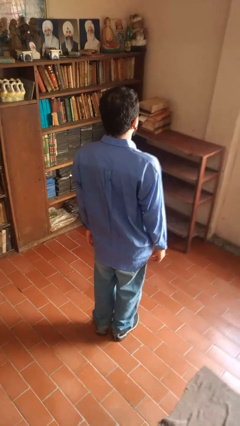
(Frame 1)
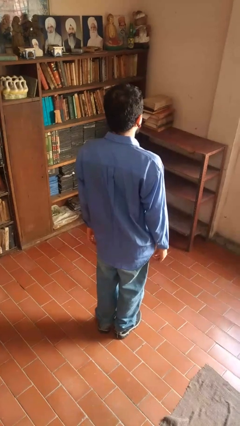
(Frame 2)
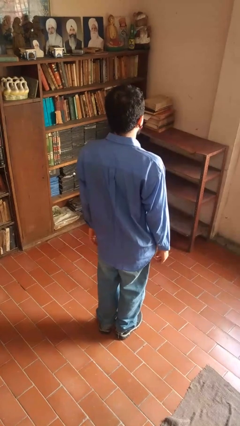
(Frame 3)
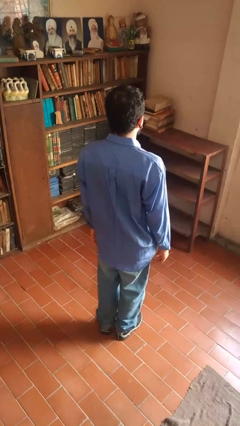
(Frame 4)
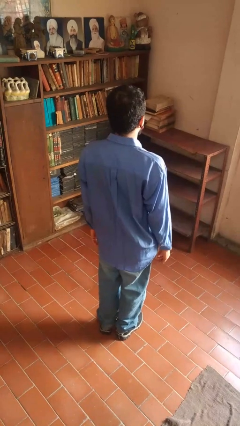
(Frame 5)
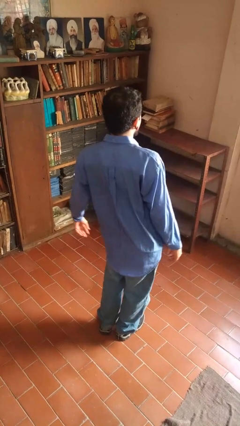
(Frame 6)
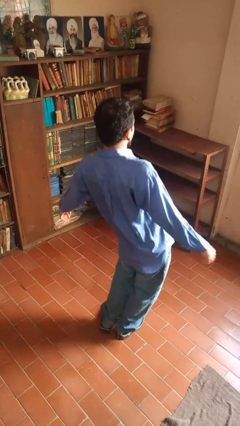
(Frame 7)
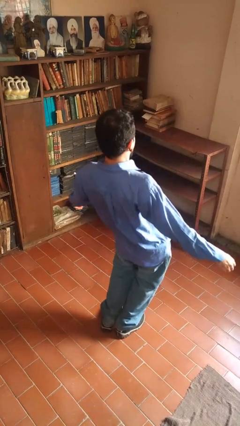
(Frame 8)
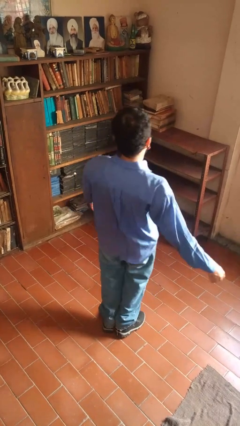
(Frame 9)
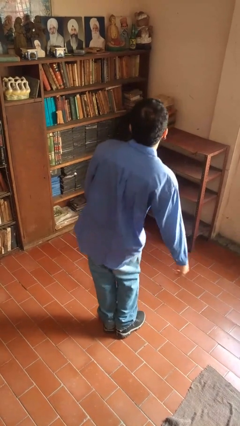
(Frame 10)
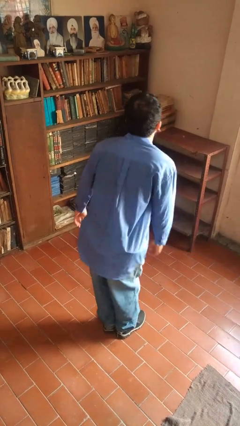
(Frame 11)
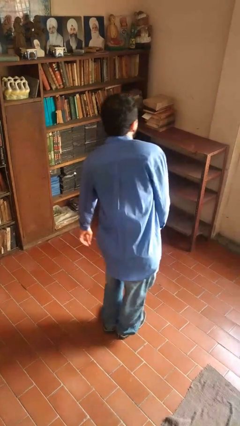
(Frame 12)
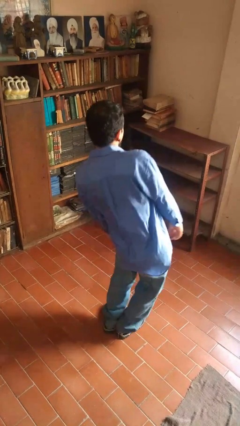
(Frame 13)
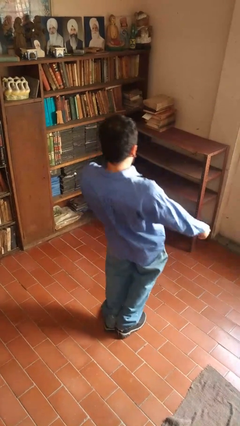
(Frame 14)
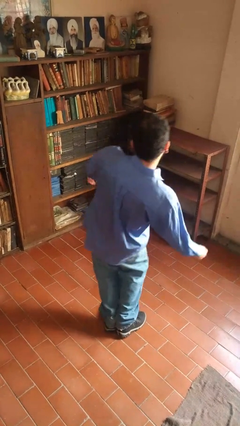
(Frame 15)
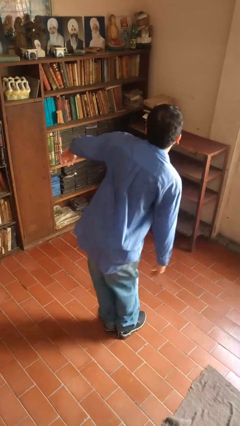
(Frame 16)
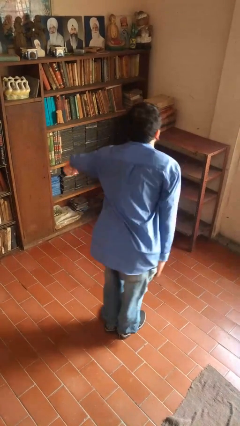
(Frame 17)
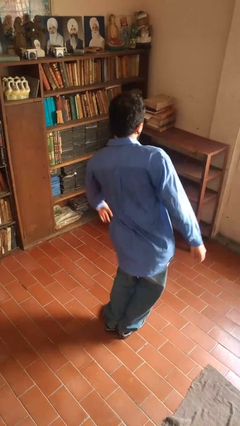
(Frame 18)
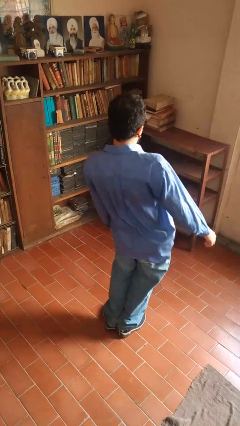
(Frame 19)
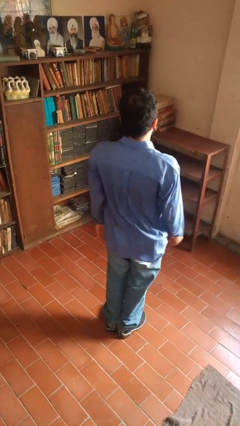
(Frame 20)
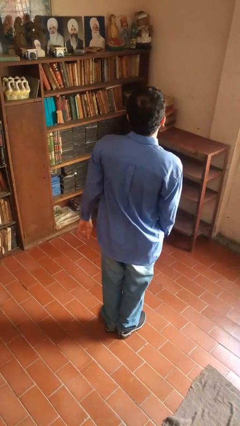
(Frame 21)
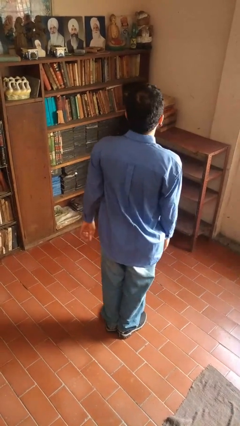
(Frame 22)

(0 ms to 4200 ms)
person wiggles hips

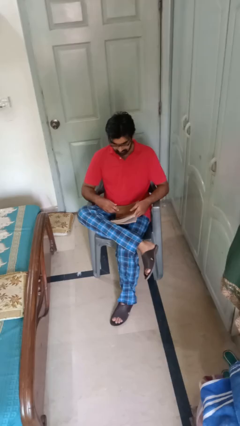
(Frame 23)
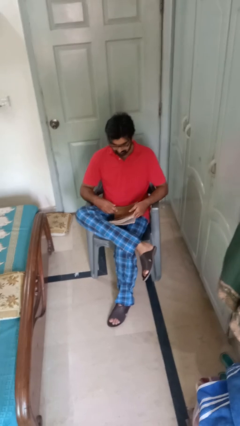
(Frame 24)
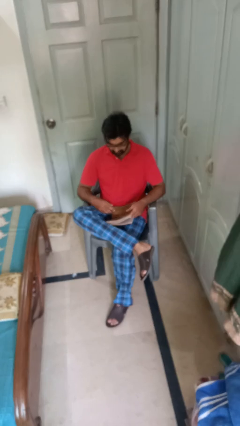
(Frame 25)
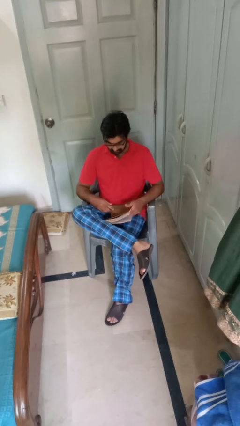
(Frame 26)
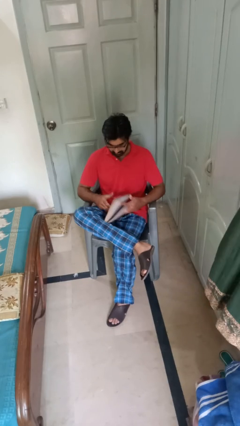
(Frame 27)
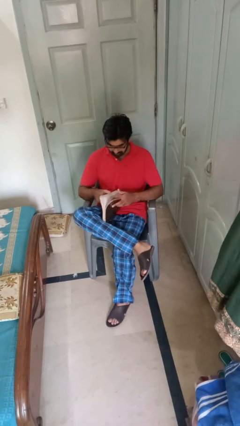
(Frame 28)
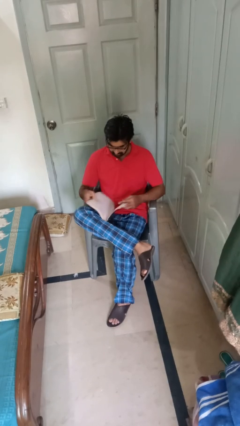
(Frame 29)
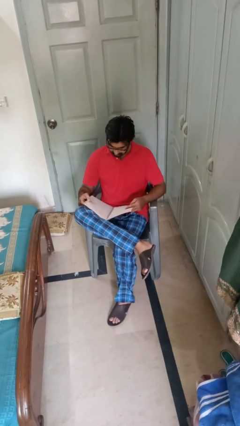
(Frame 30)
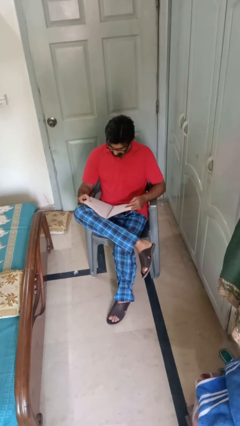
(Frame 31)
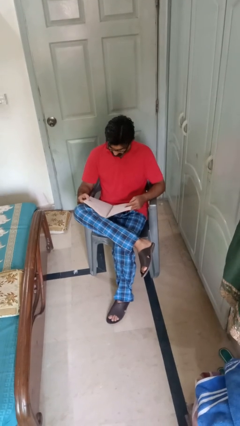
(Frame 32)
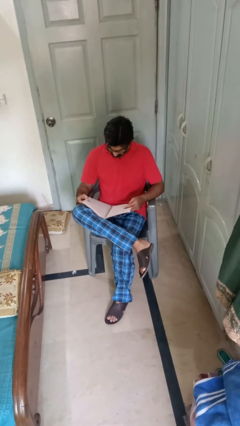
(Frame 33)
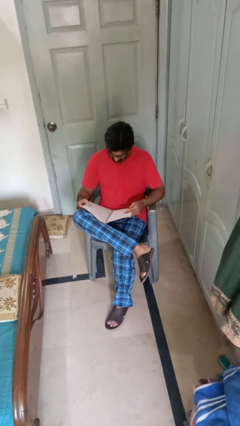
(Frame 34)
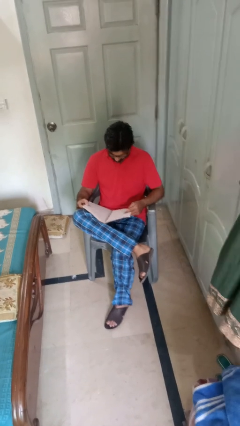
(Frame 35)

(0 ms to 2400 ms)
person reads magazine

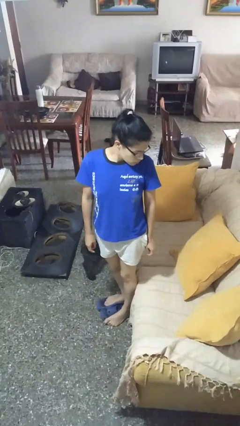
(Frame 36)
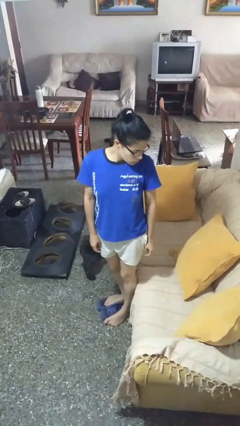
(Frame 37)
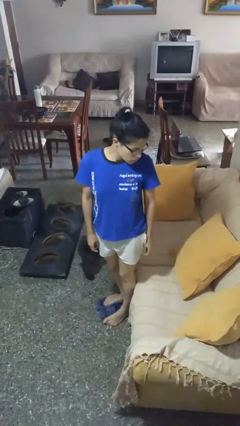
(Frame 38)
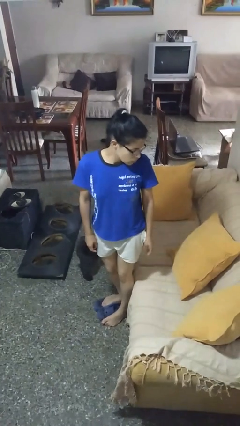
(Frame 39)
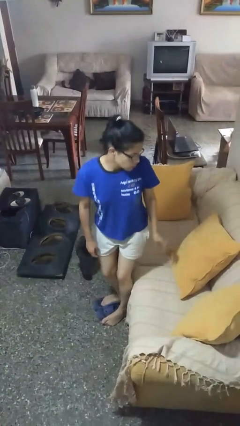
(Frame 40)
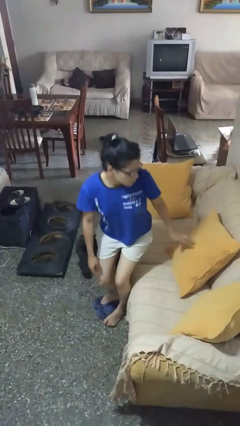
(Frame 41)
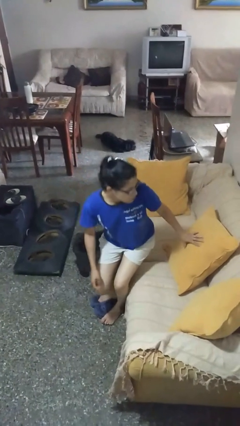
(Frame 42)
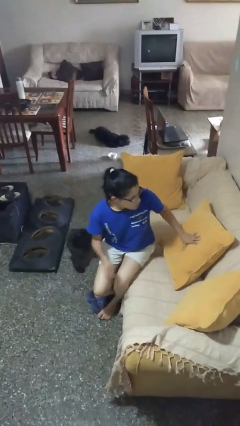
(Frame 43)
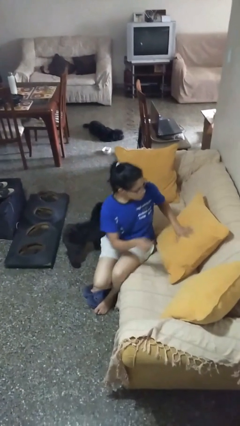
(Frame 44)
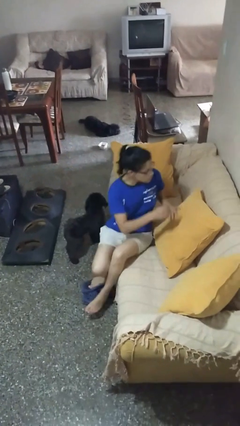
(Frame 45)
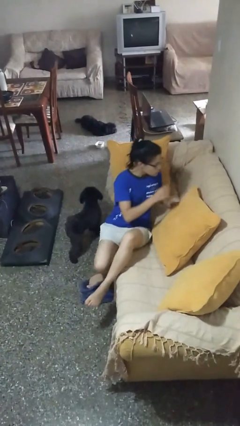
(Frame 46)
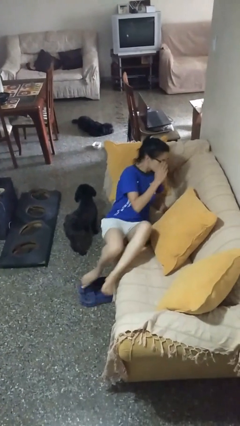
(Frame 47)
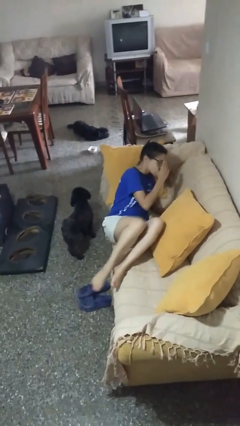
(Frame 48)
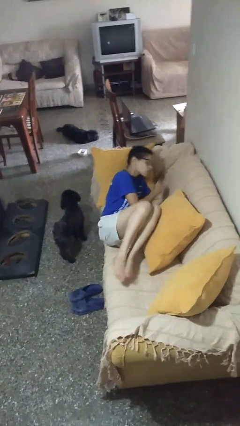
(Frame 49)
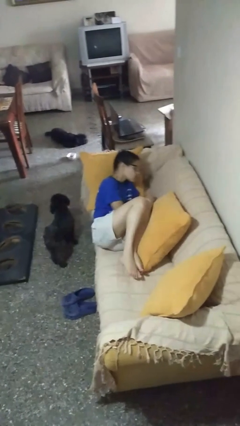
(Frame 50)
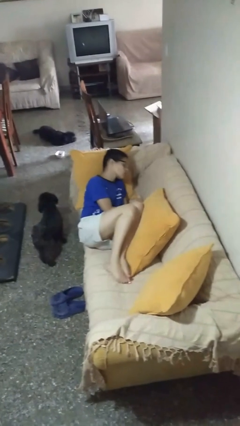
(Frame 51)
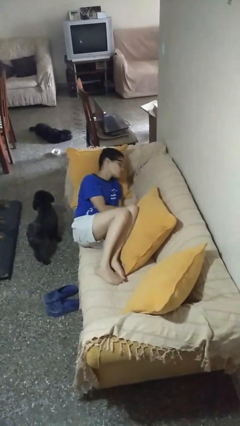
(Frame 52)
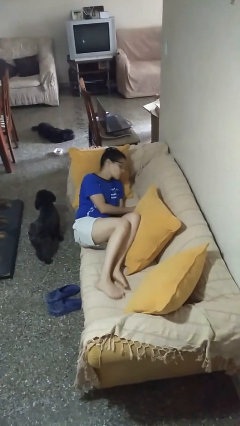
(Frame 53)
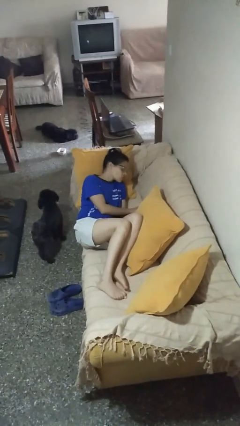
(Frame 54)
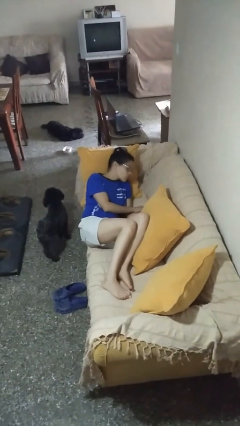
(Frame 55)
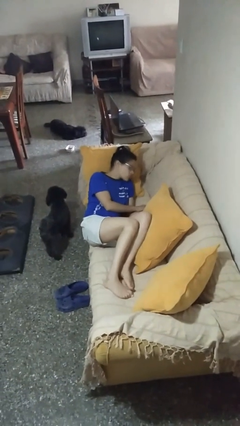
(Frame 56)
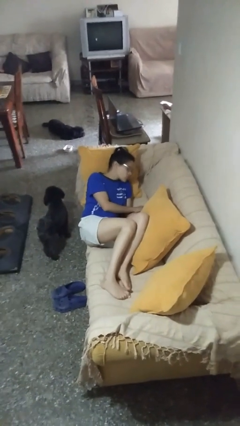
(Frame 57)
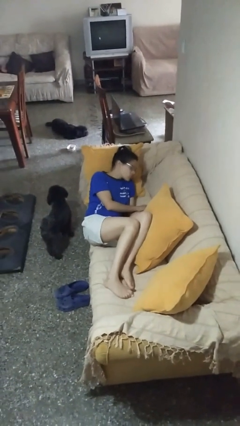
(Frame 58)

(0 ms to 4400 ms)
person lies down on couch

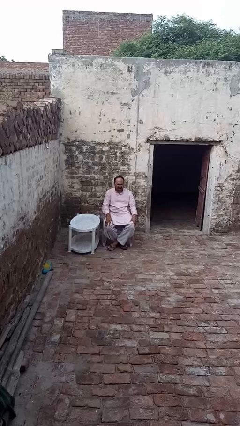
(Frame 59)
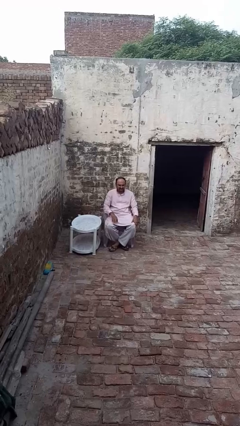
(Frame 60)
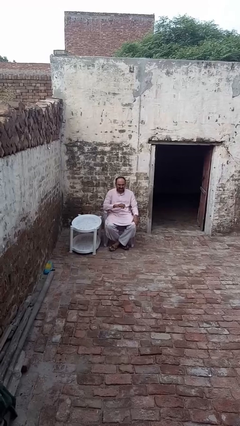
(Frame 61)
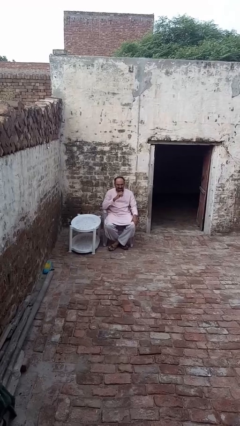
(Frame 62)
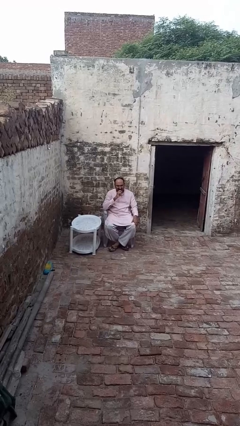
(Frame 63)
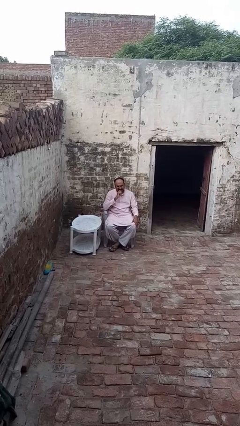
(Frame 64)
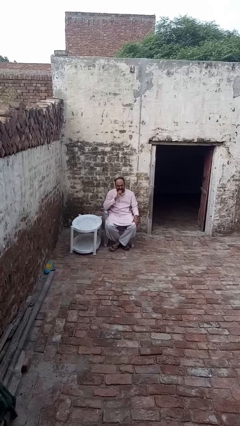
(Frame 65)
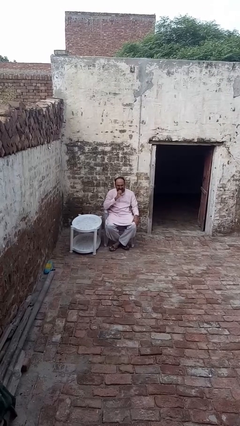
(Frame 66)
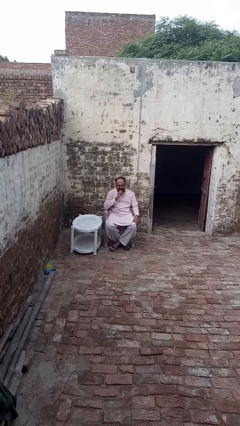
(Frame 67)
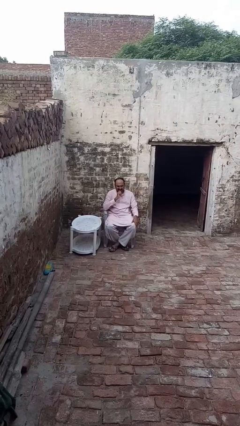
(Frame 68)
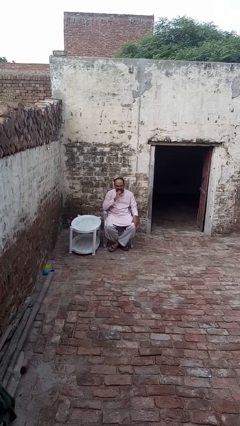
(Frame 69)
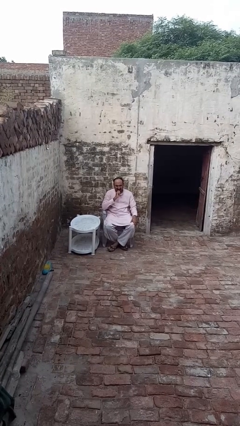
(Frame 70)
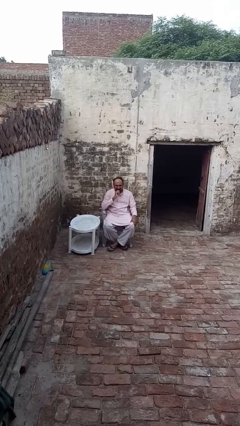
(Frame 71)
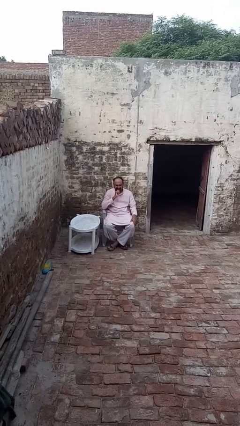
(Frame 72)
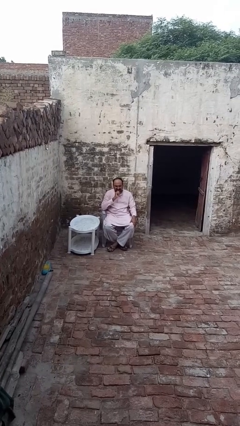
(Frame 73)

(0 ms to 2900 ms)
person strokes chin

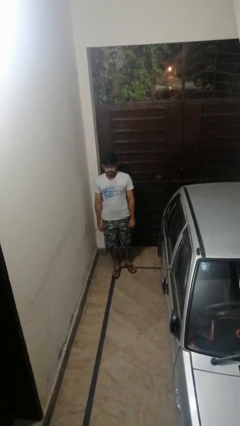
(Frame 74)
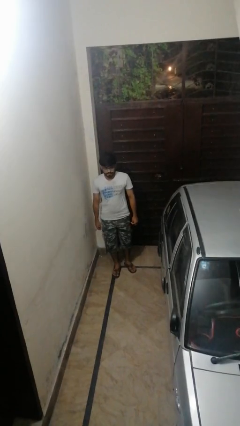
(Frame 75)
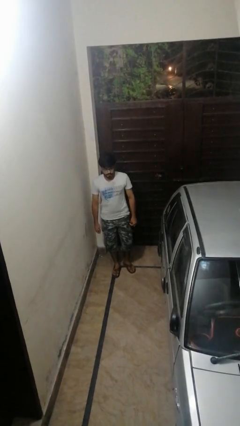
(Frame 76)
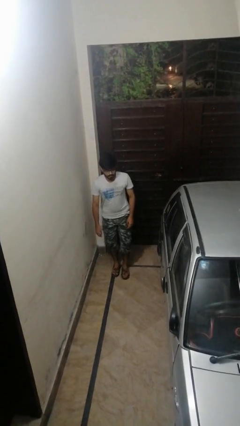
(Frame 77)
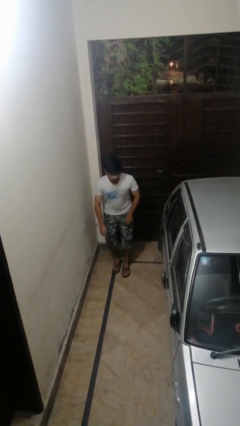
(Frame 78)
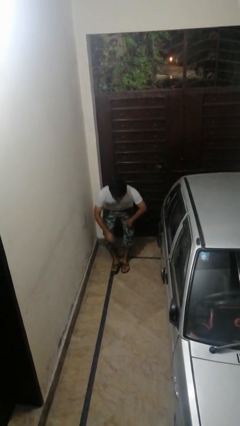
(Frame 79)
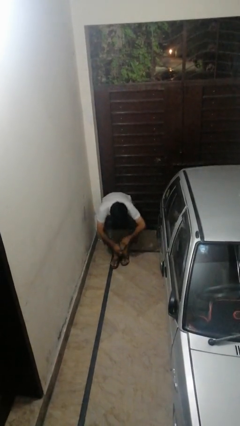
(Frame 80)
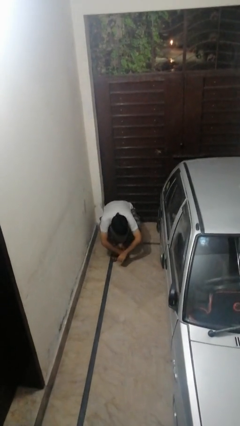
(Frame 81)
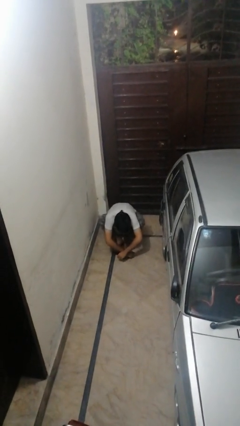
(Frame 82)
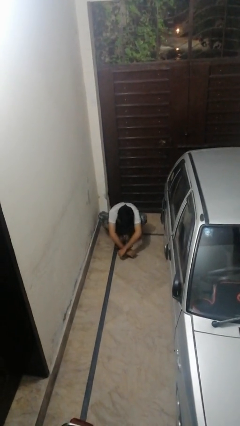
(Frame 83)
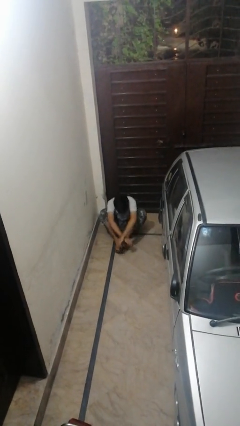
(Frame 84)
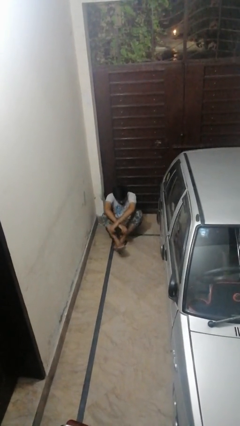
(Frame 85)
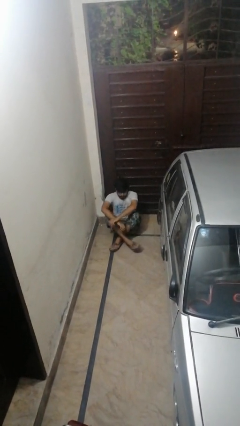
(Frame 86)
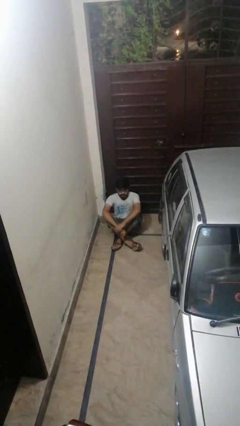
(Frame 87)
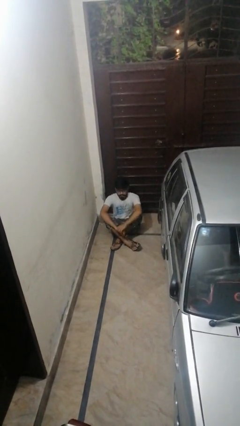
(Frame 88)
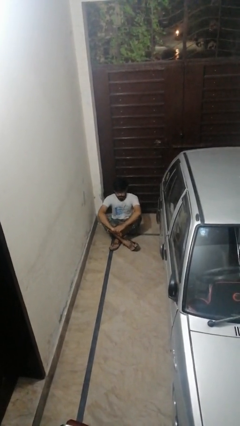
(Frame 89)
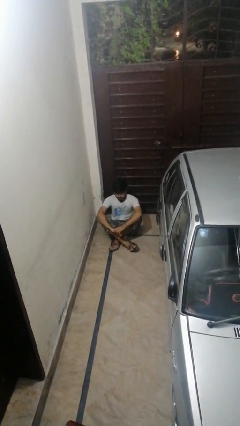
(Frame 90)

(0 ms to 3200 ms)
person sits crisscross

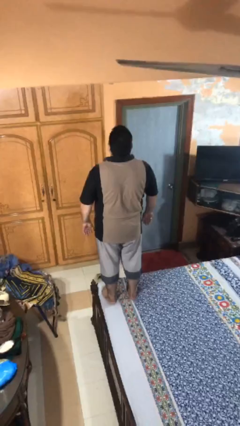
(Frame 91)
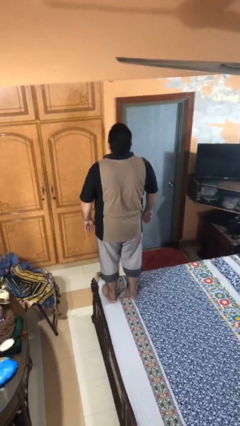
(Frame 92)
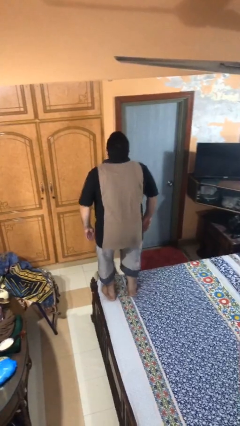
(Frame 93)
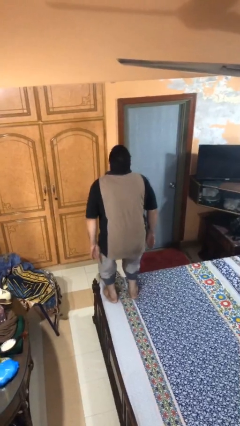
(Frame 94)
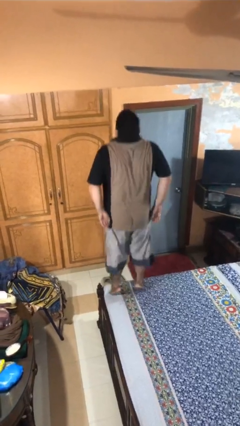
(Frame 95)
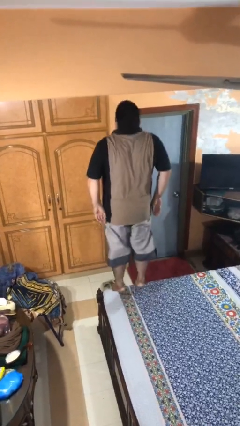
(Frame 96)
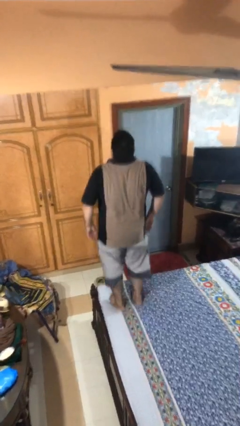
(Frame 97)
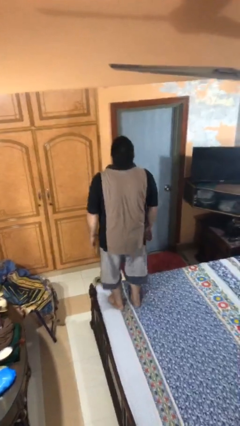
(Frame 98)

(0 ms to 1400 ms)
person jumps on bed
